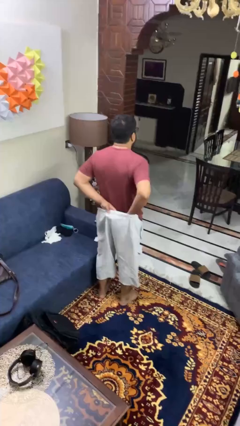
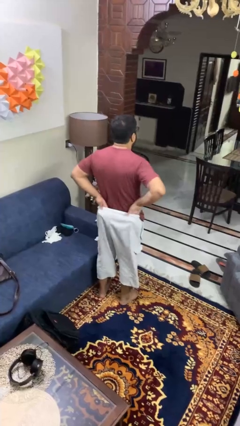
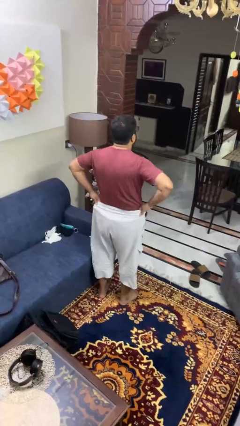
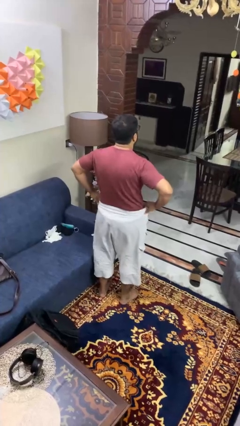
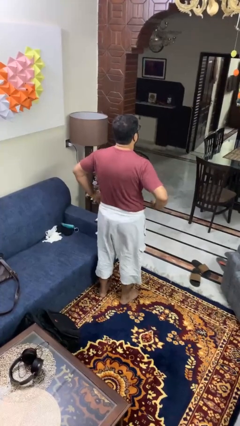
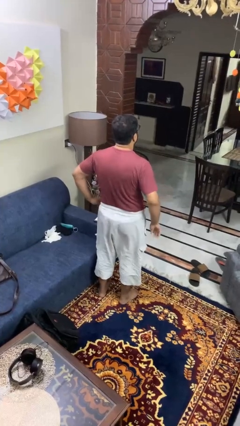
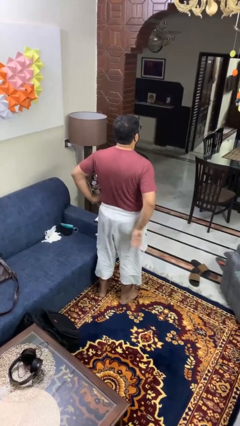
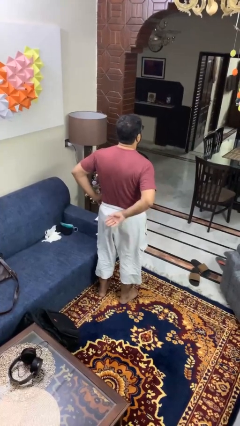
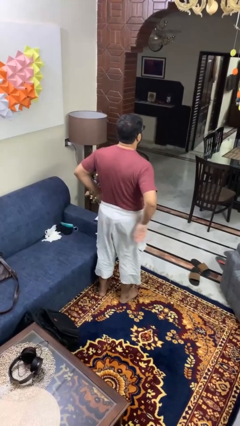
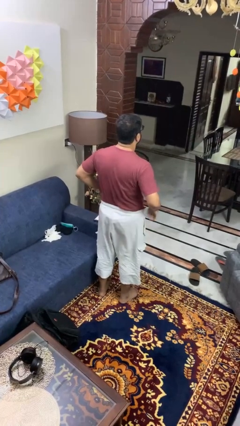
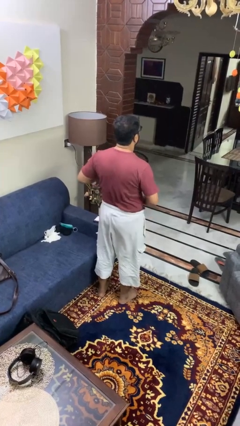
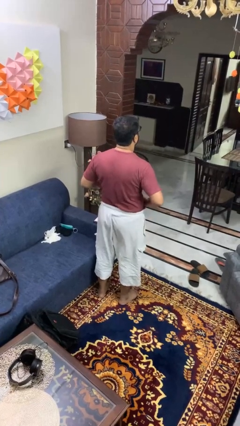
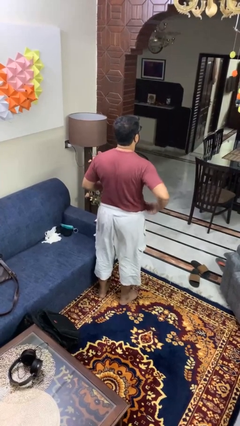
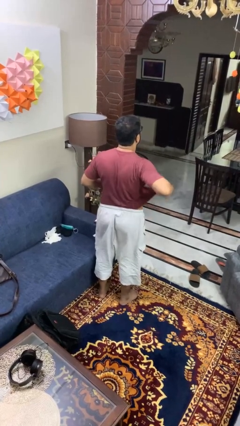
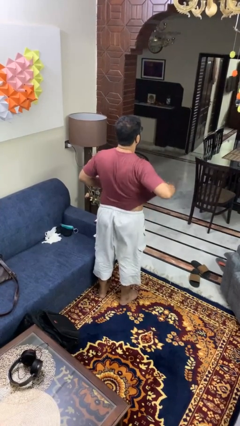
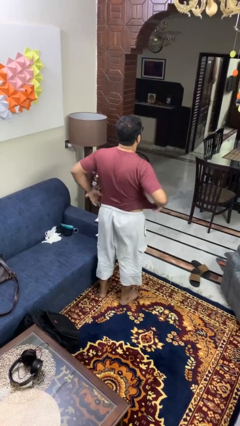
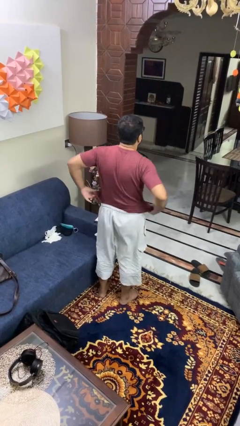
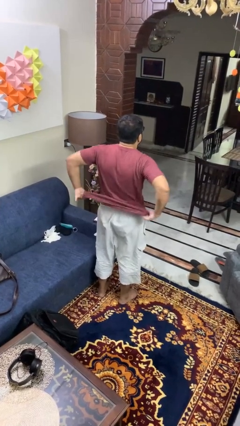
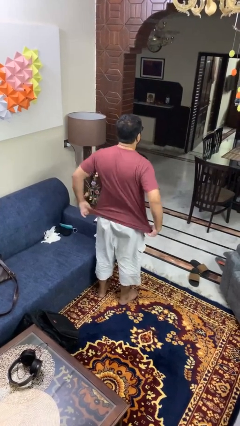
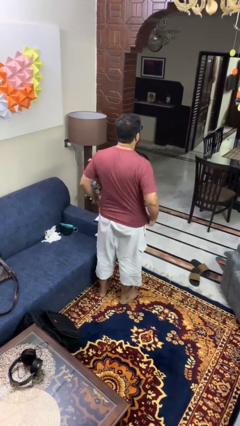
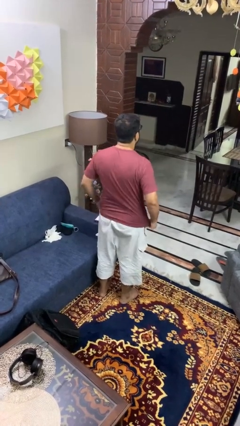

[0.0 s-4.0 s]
person untucks shirt

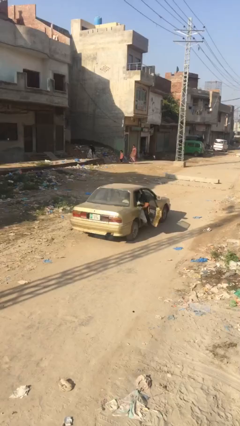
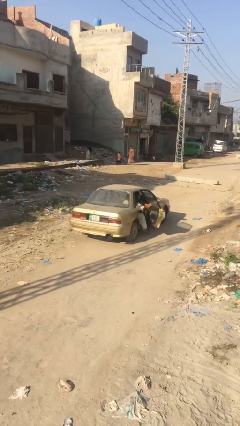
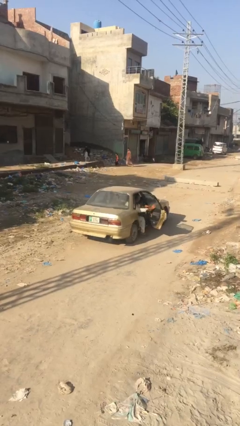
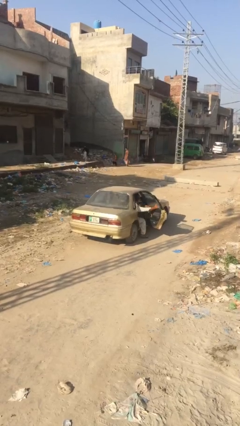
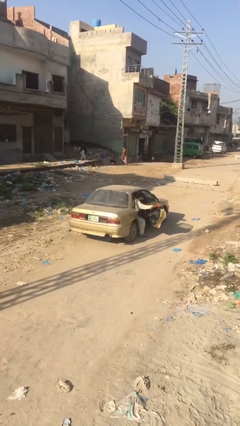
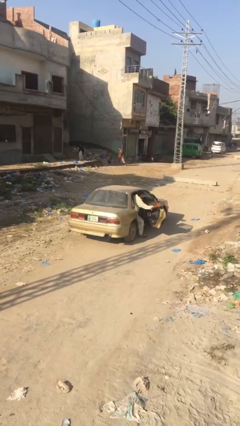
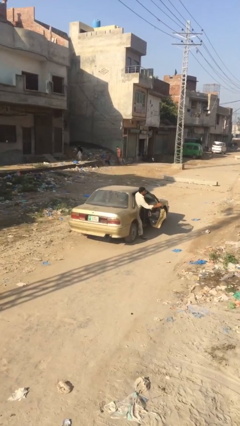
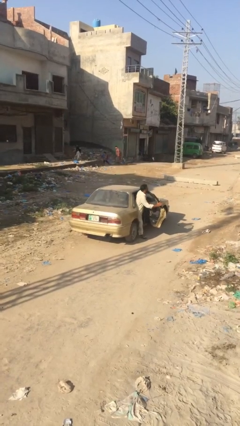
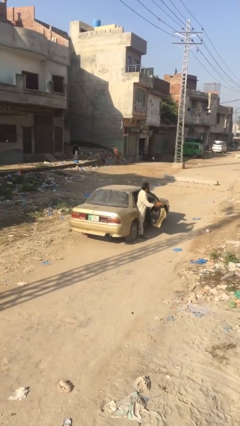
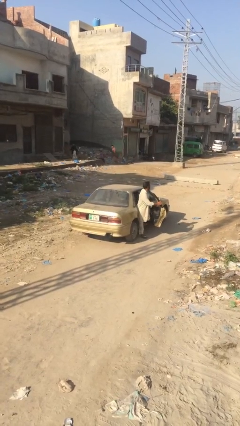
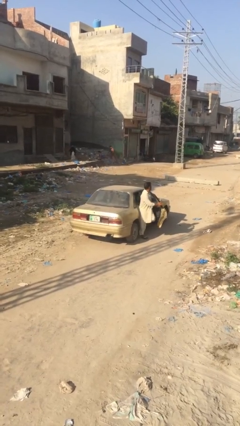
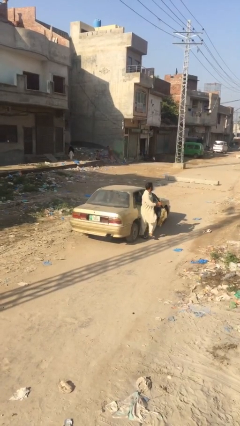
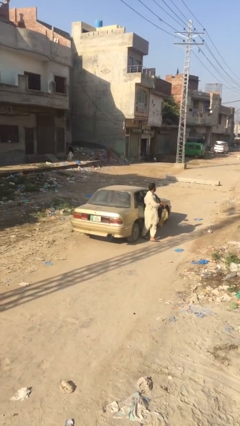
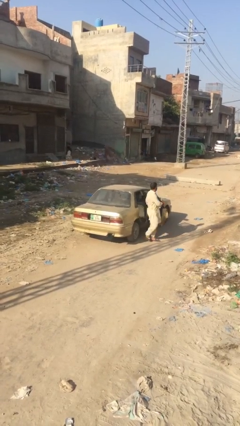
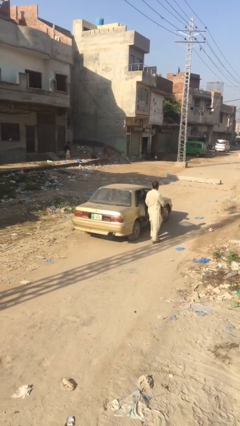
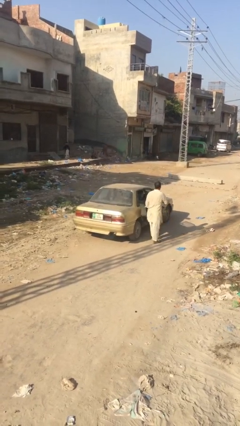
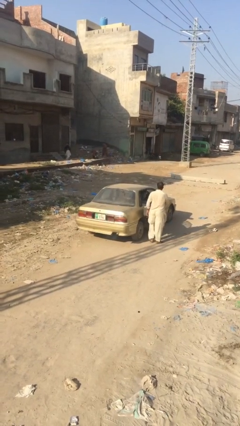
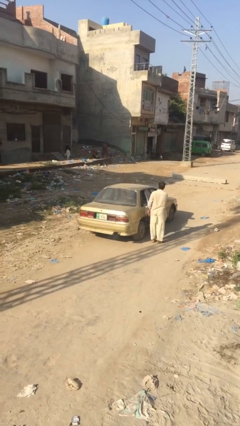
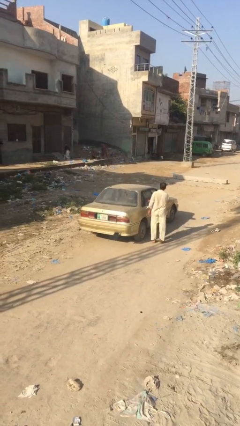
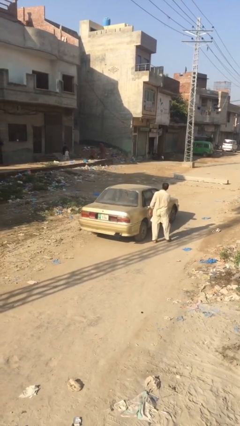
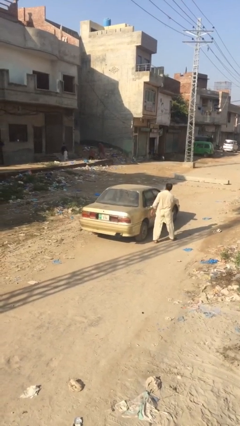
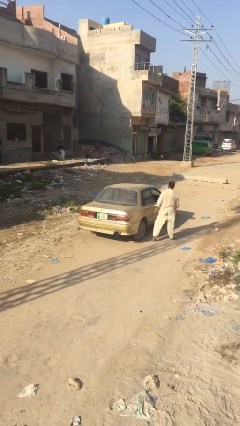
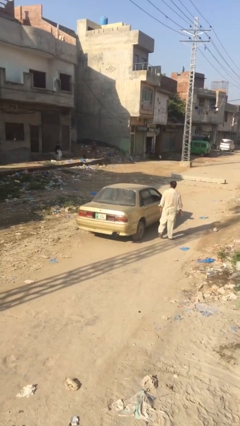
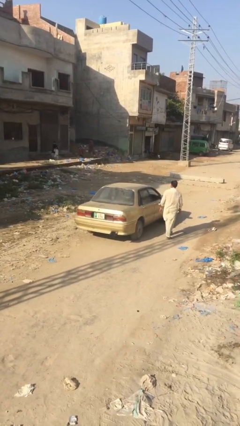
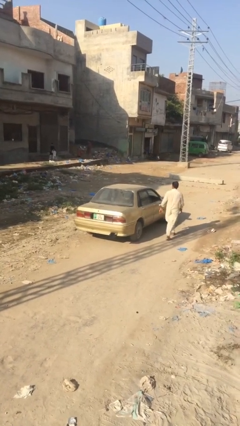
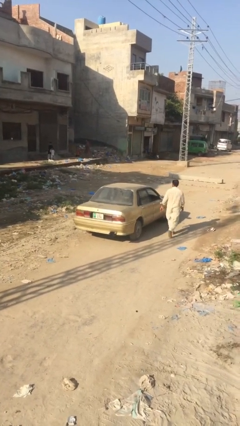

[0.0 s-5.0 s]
car drops off person

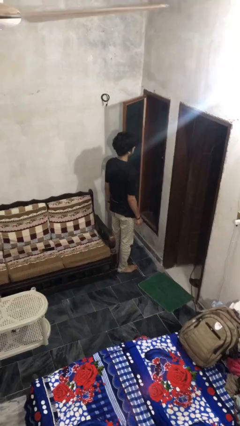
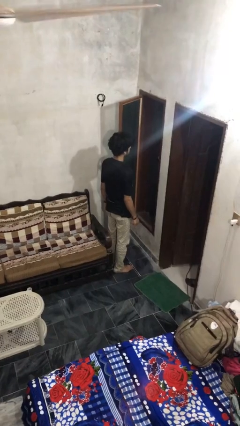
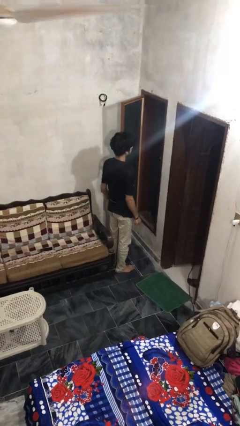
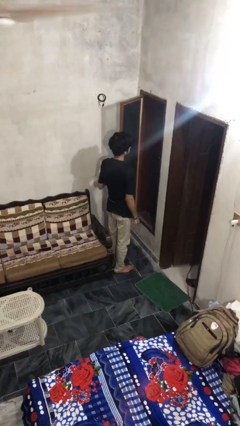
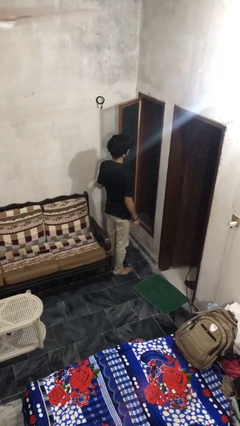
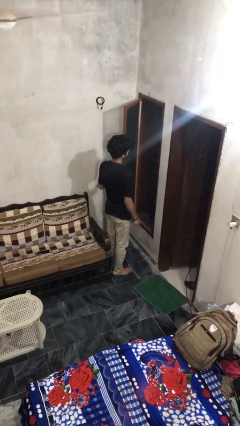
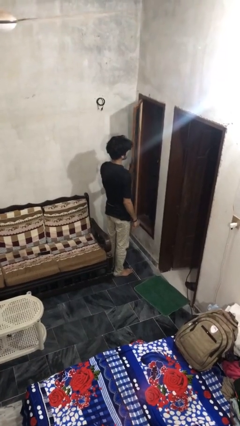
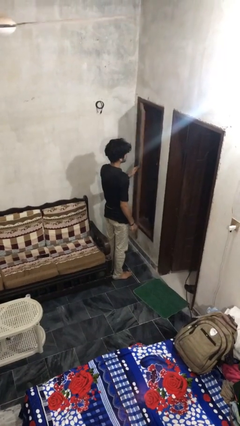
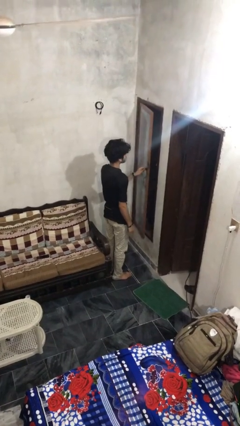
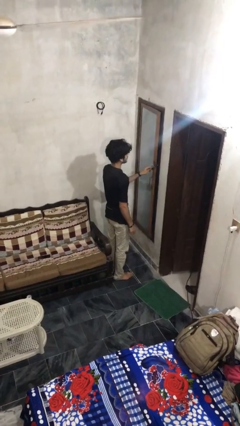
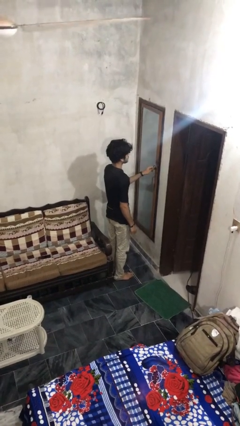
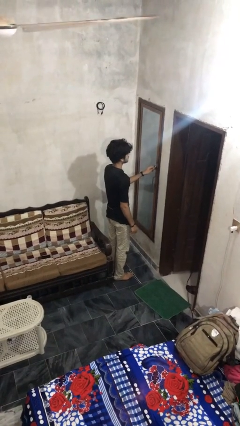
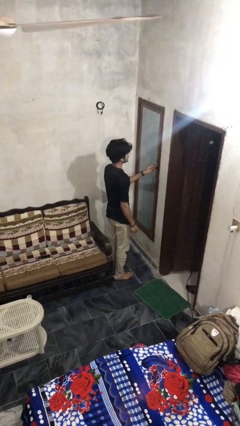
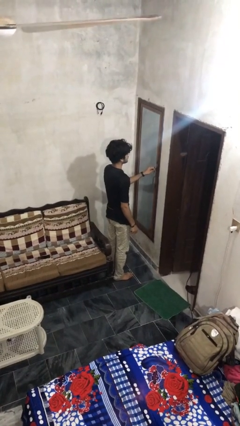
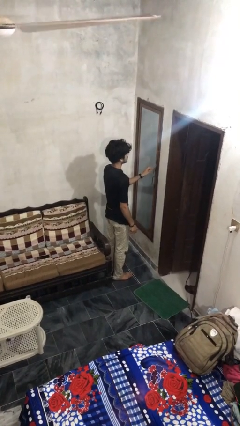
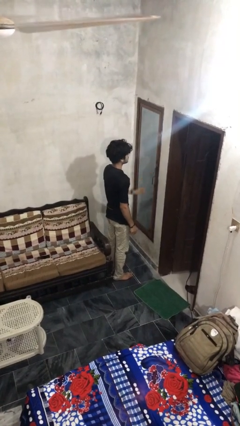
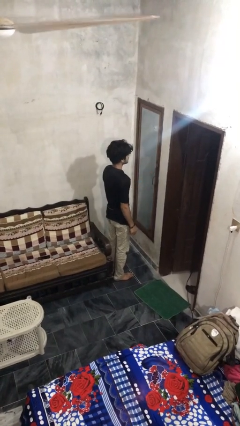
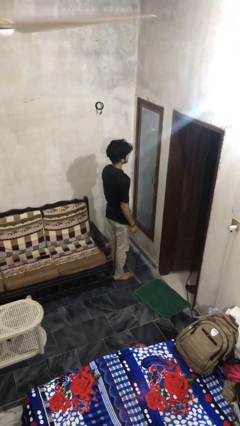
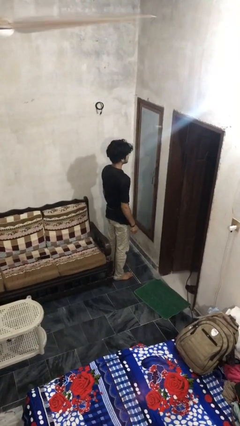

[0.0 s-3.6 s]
person closes home window

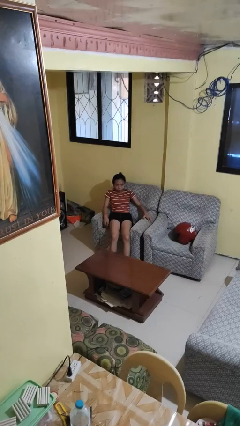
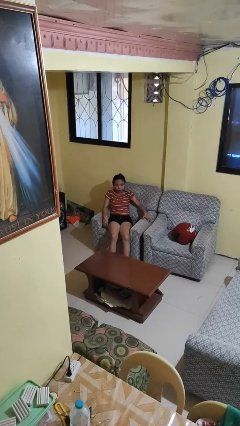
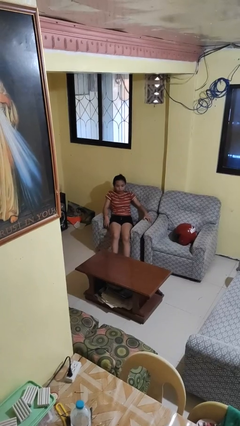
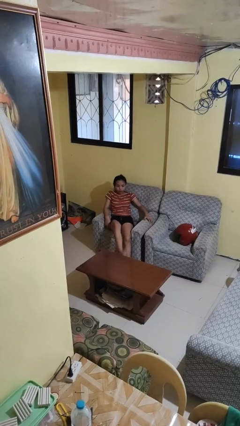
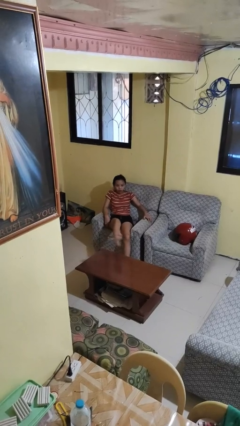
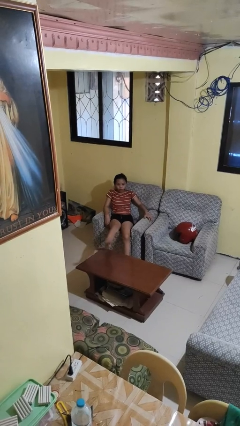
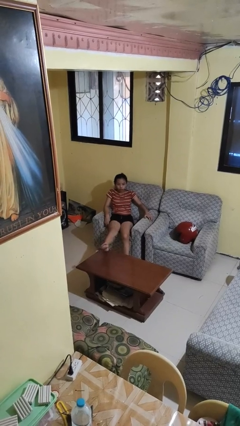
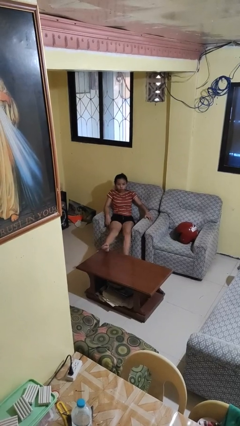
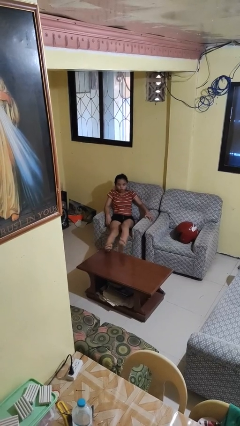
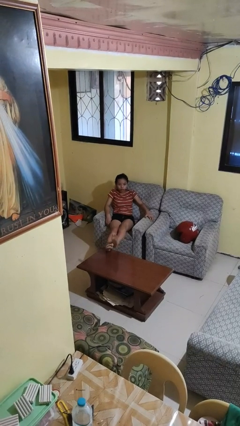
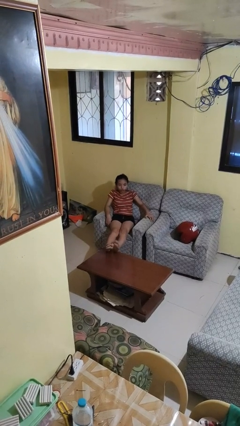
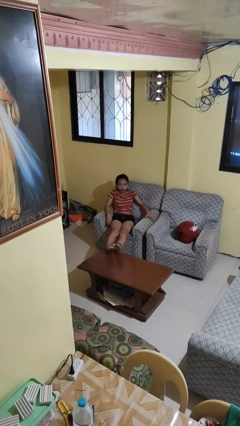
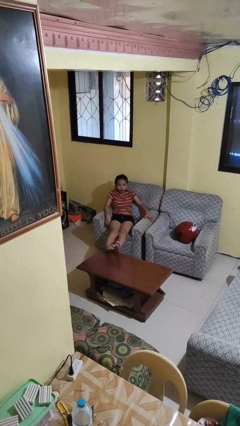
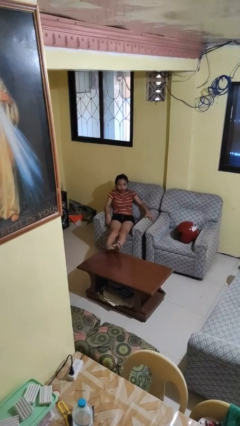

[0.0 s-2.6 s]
person puts feet up

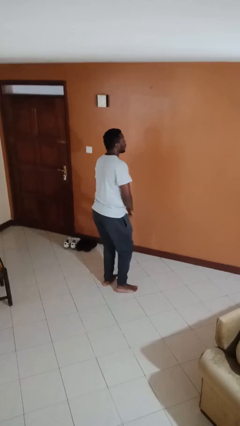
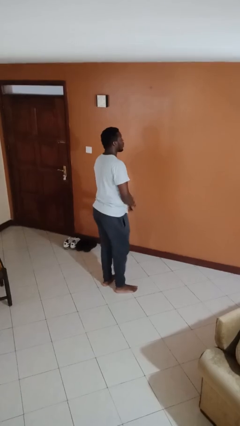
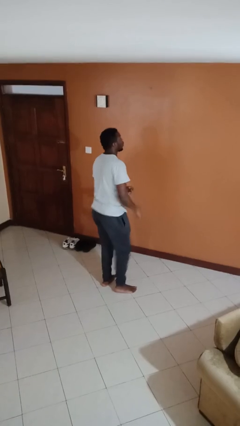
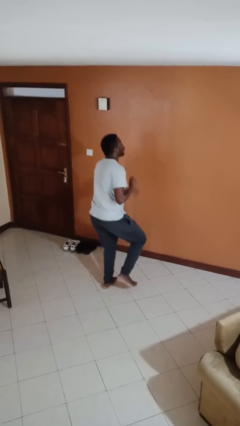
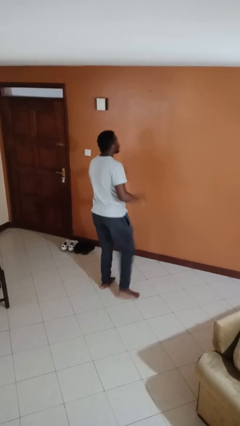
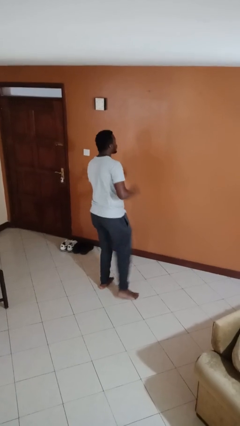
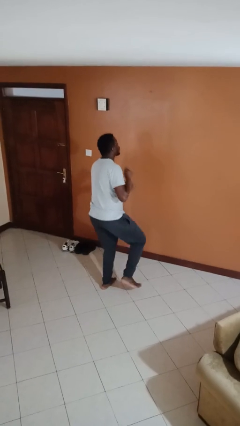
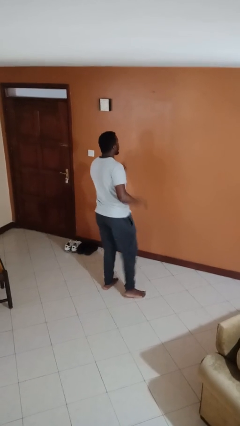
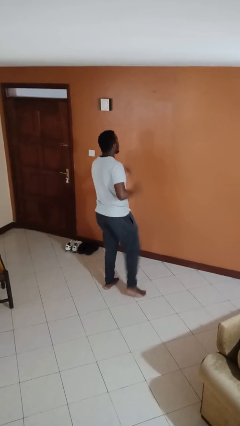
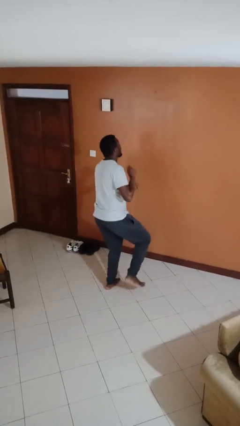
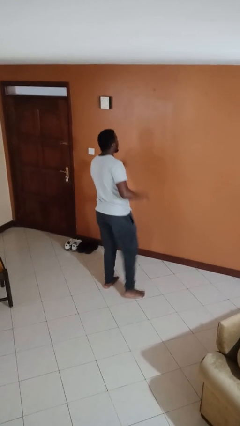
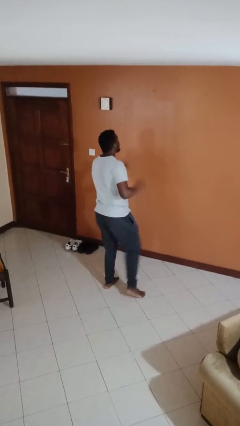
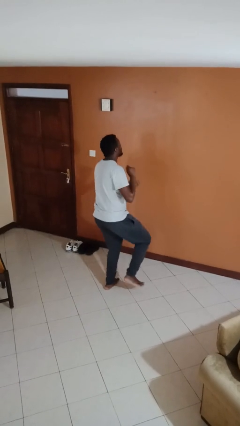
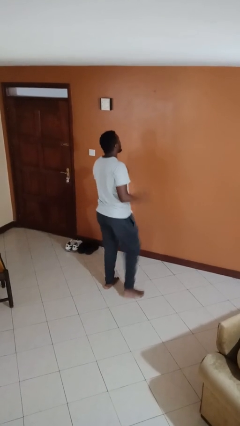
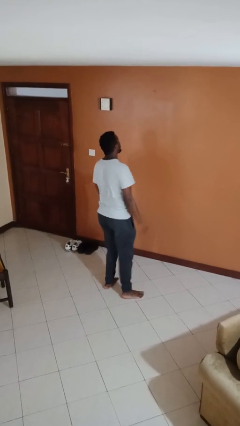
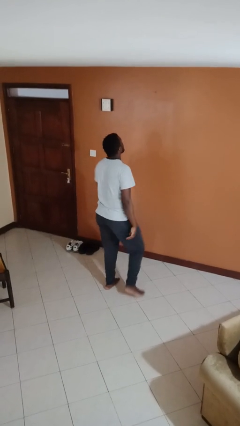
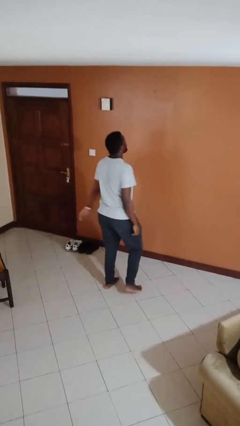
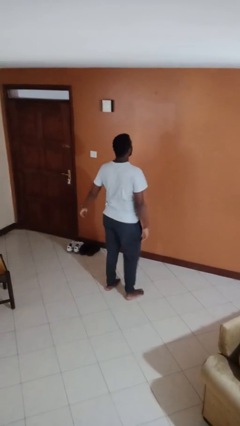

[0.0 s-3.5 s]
person dances in place
